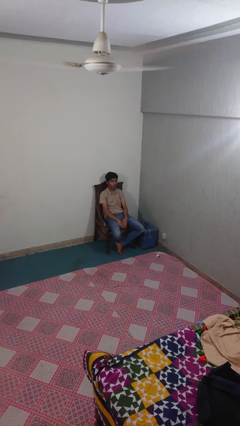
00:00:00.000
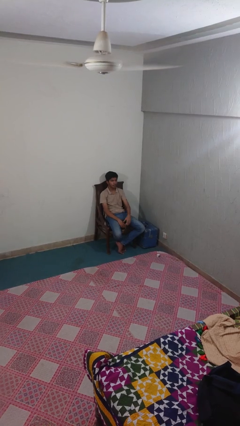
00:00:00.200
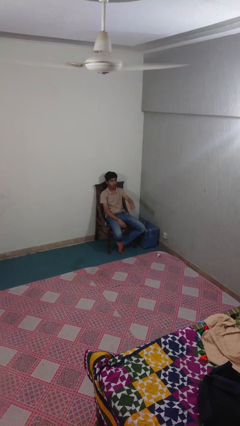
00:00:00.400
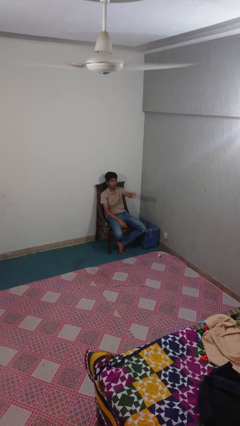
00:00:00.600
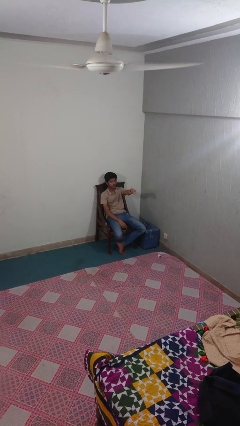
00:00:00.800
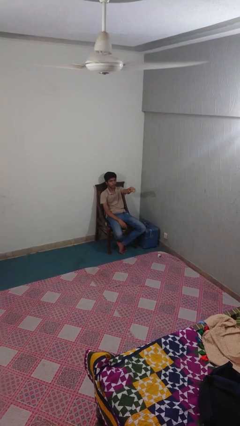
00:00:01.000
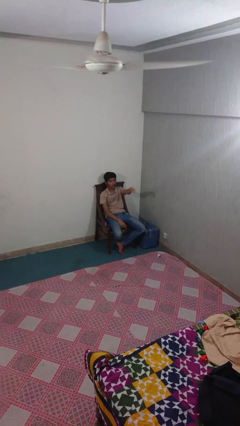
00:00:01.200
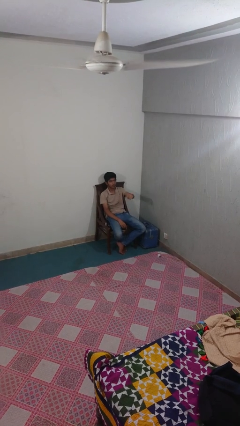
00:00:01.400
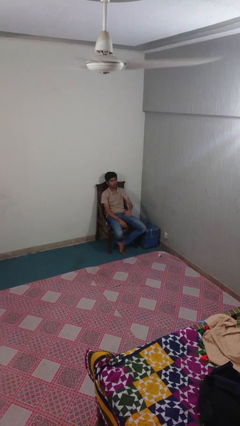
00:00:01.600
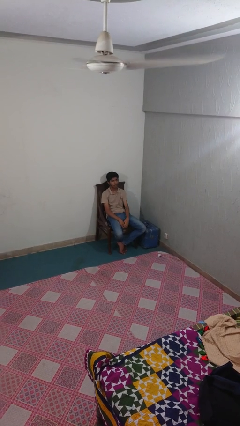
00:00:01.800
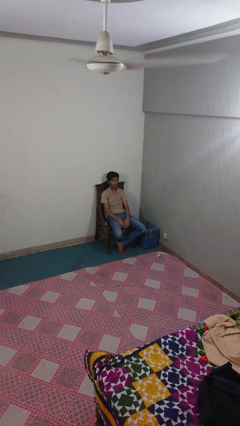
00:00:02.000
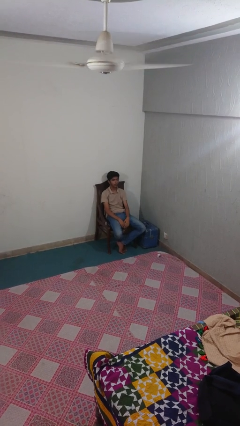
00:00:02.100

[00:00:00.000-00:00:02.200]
person points at person

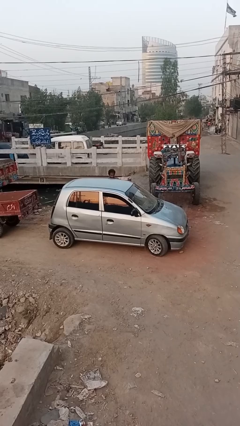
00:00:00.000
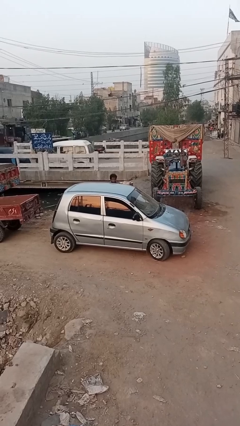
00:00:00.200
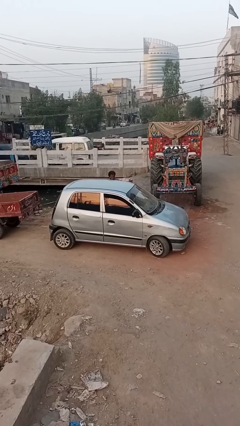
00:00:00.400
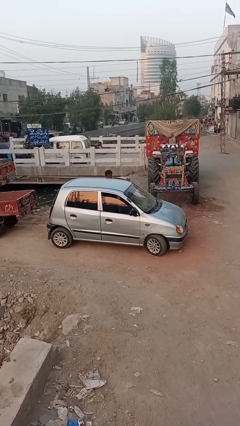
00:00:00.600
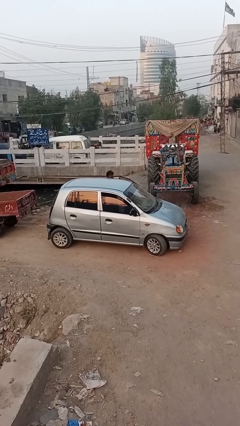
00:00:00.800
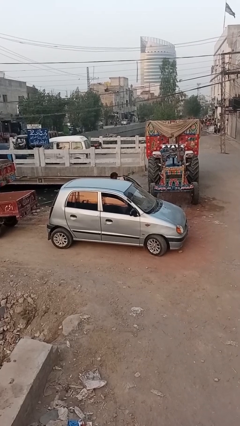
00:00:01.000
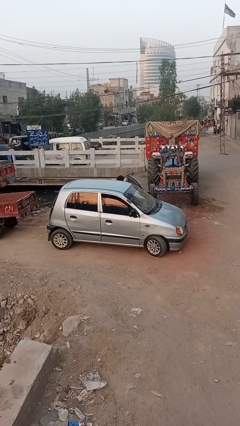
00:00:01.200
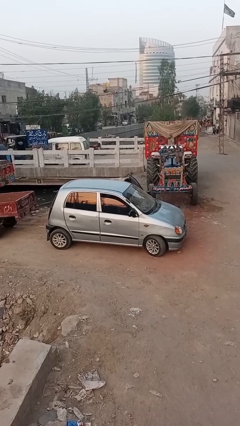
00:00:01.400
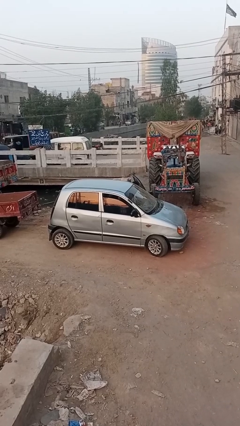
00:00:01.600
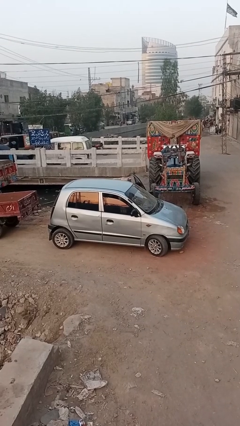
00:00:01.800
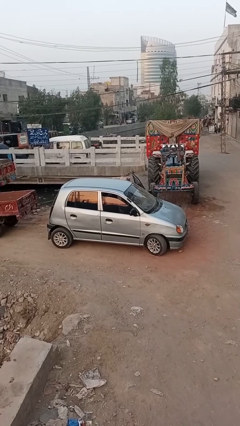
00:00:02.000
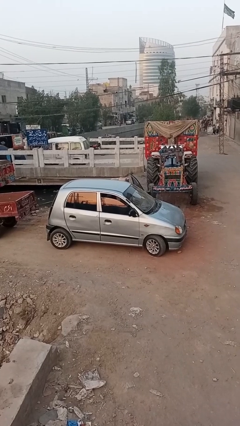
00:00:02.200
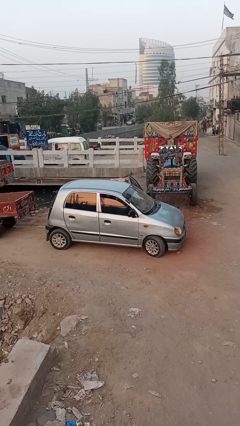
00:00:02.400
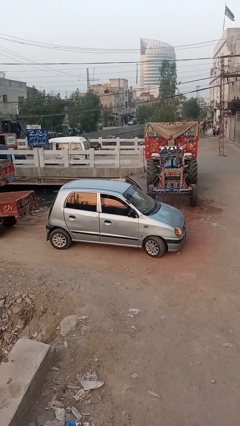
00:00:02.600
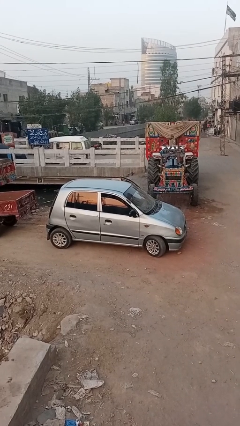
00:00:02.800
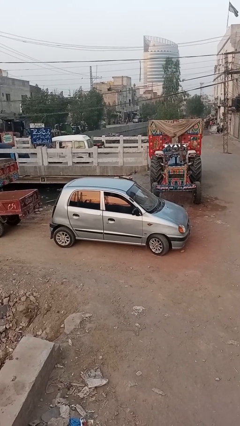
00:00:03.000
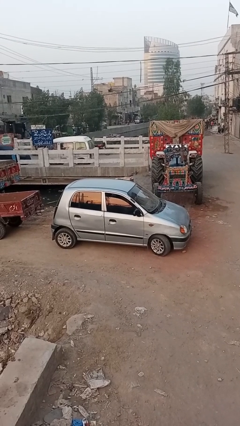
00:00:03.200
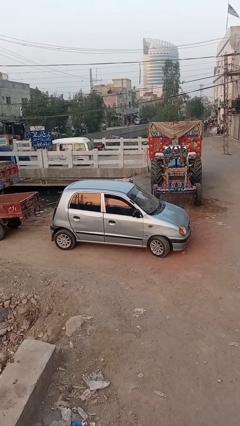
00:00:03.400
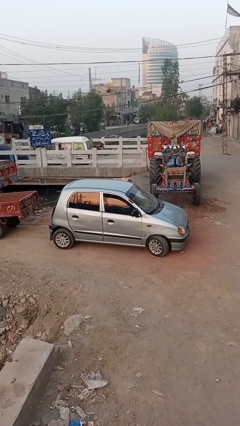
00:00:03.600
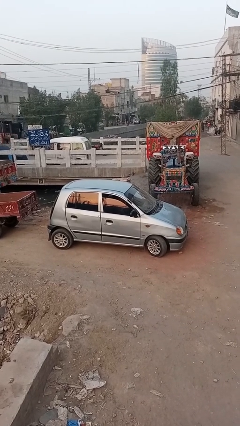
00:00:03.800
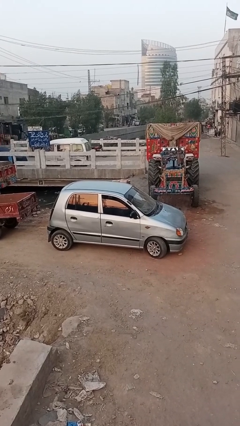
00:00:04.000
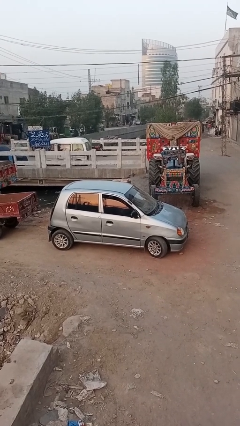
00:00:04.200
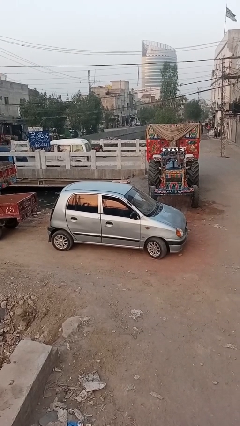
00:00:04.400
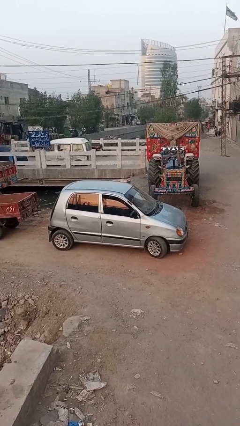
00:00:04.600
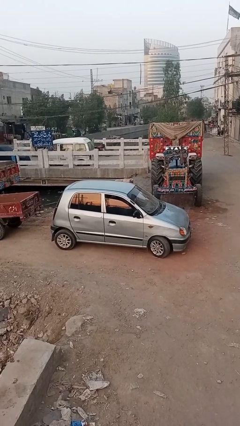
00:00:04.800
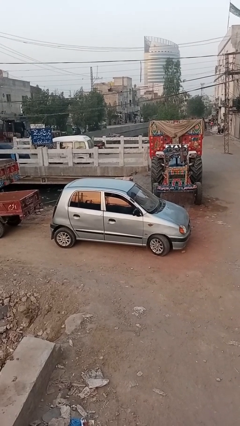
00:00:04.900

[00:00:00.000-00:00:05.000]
car picks up person

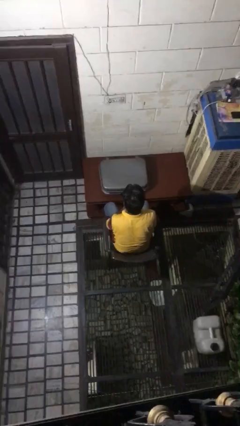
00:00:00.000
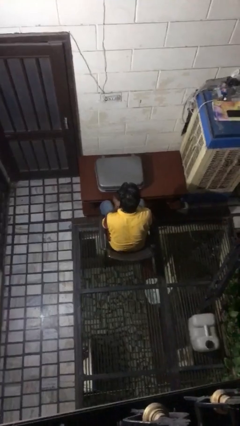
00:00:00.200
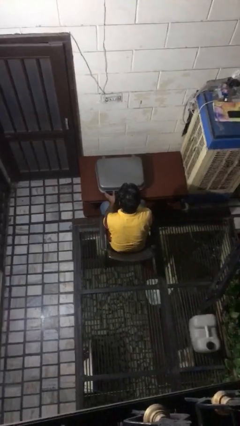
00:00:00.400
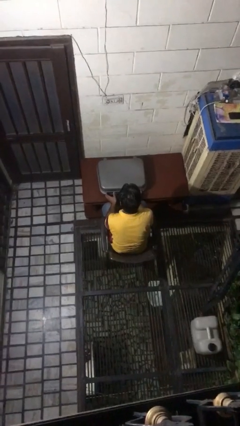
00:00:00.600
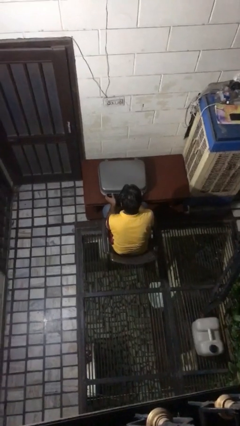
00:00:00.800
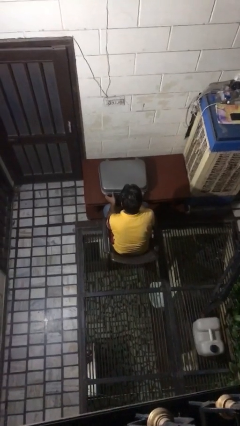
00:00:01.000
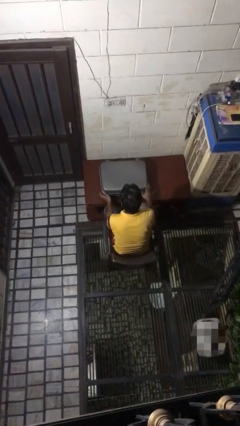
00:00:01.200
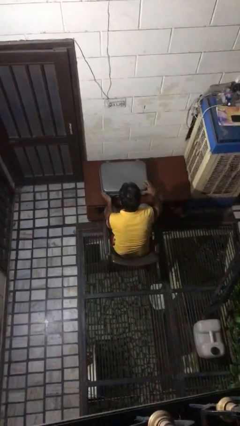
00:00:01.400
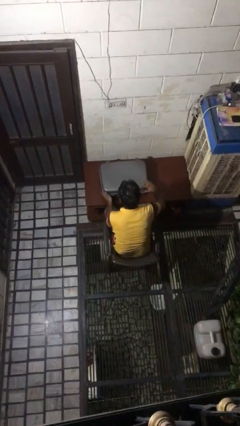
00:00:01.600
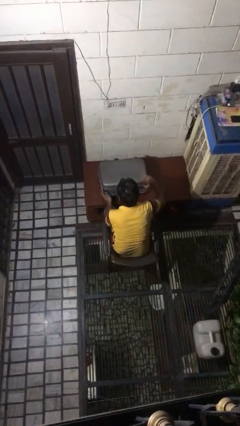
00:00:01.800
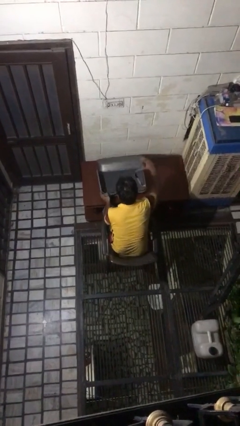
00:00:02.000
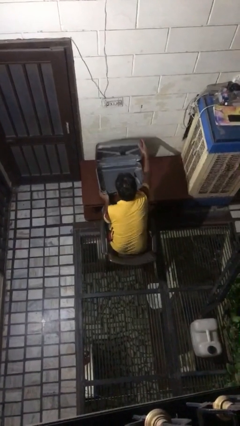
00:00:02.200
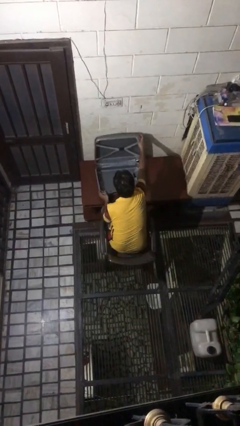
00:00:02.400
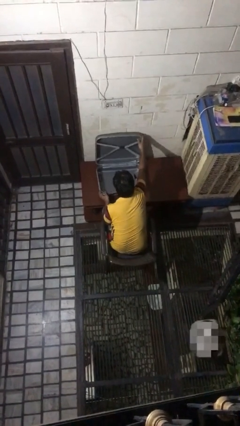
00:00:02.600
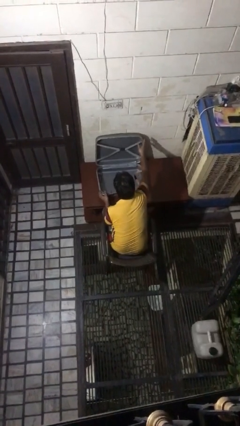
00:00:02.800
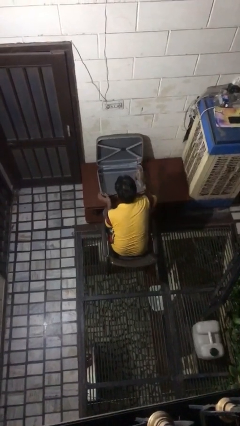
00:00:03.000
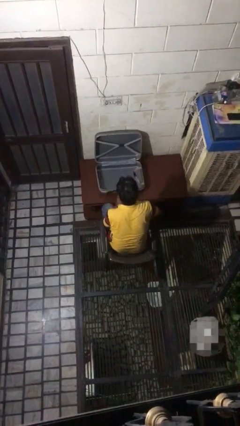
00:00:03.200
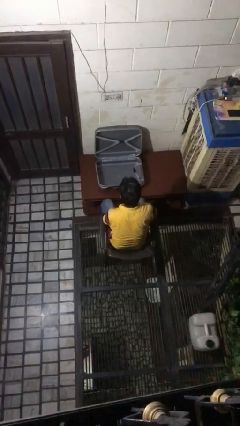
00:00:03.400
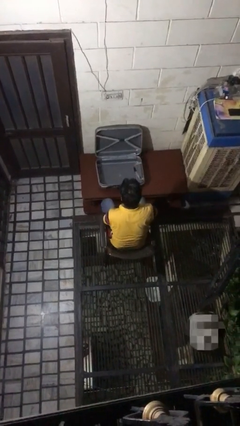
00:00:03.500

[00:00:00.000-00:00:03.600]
person opens suitcase

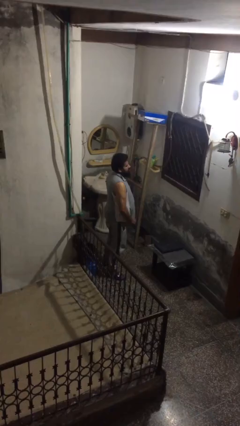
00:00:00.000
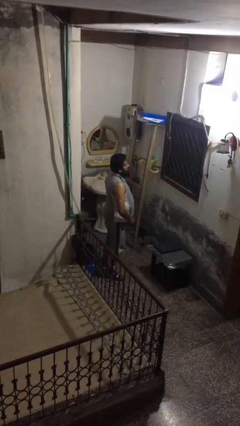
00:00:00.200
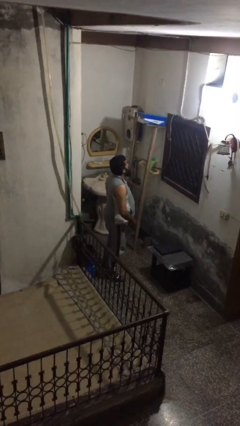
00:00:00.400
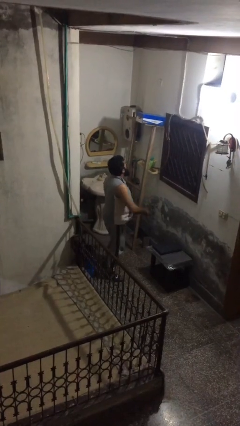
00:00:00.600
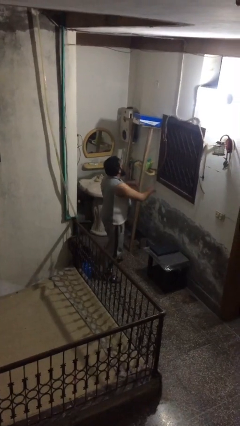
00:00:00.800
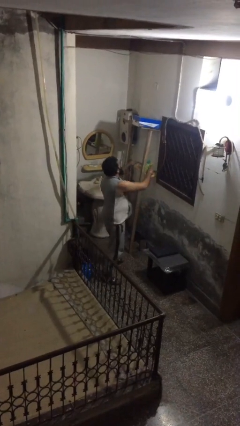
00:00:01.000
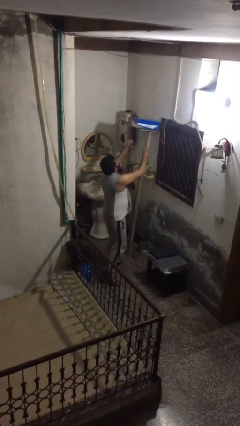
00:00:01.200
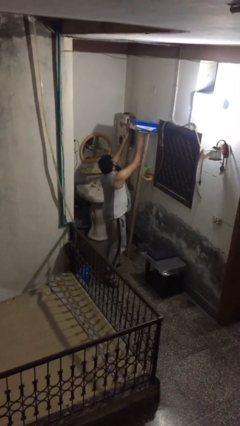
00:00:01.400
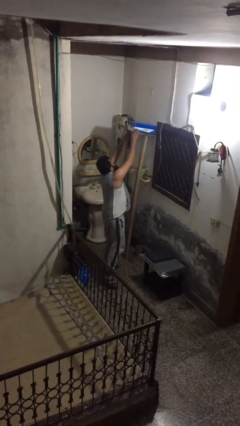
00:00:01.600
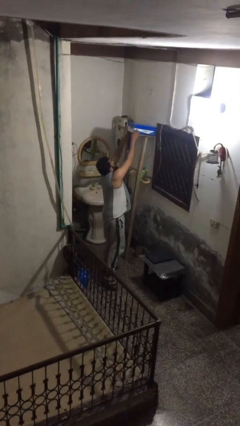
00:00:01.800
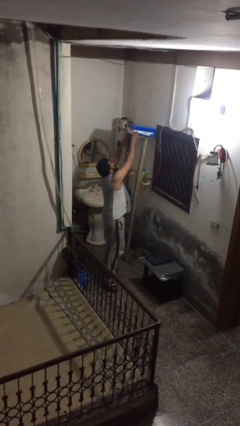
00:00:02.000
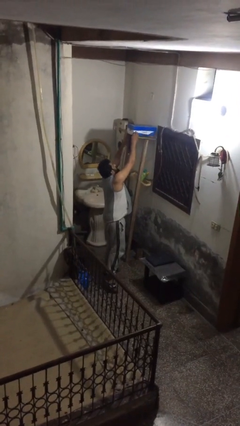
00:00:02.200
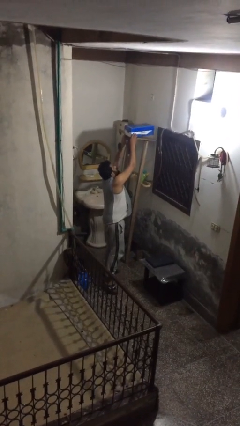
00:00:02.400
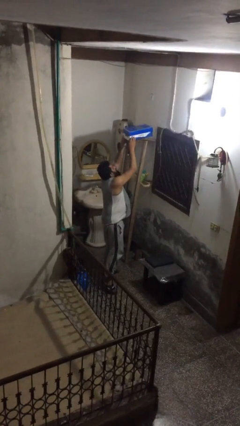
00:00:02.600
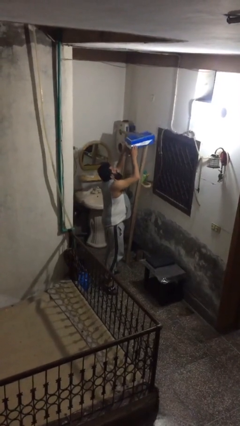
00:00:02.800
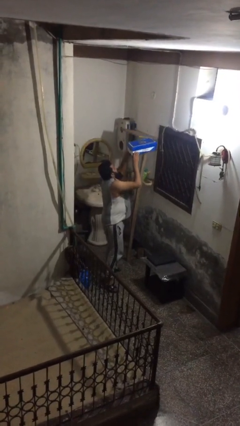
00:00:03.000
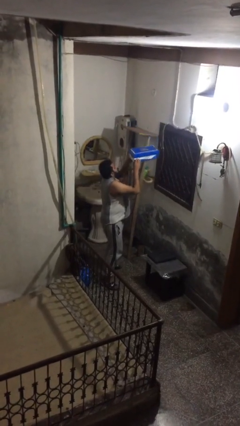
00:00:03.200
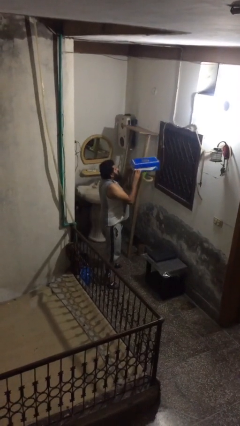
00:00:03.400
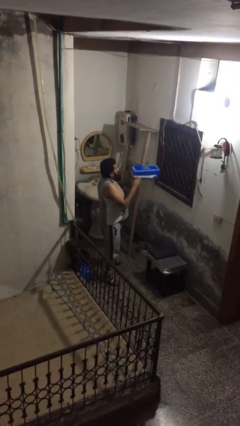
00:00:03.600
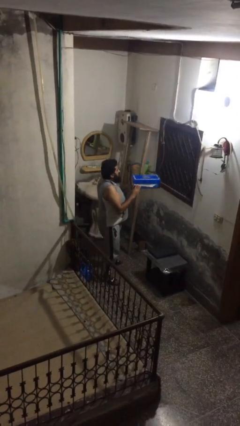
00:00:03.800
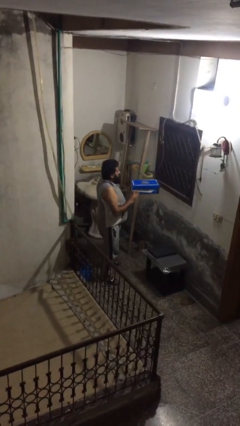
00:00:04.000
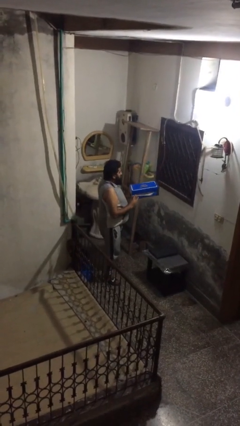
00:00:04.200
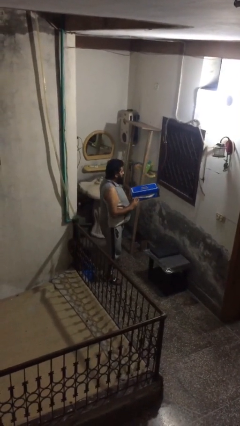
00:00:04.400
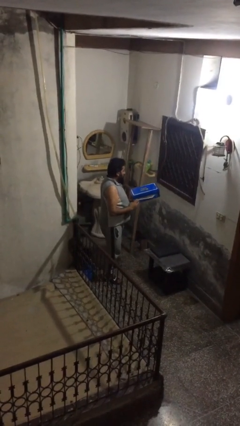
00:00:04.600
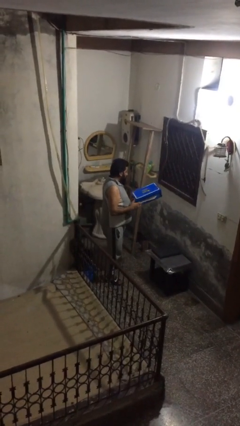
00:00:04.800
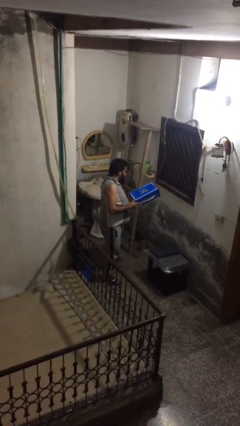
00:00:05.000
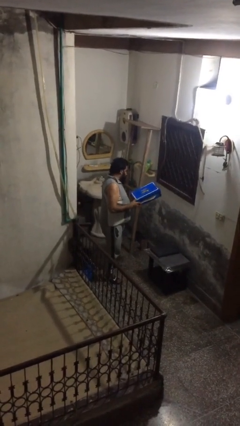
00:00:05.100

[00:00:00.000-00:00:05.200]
person picks up object from shelf

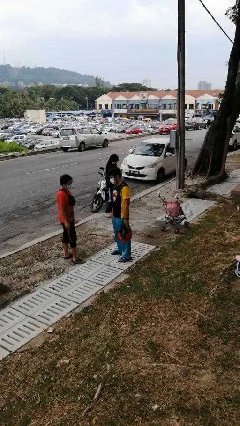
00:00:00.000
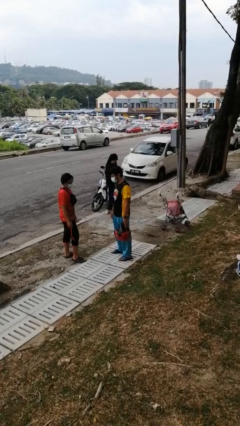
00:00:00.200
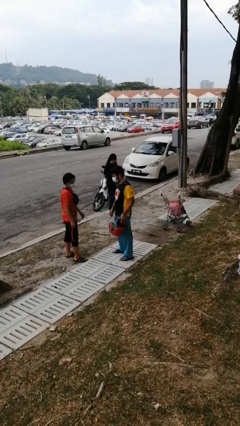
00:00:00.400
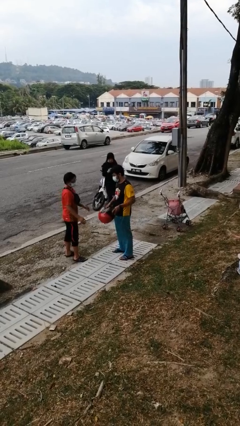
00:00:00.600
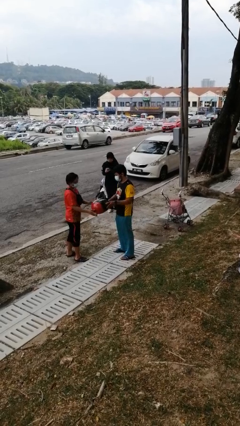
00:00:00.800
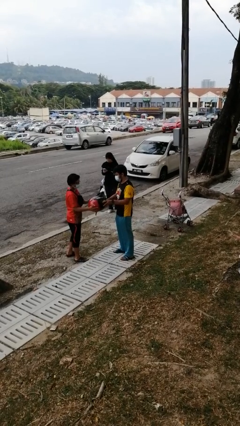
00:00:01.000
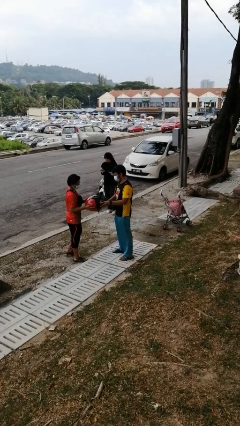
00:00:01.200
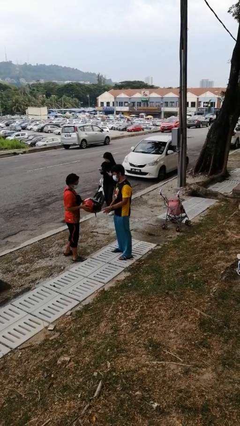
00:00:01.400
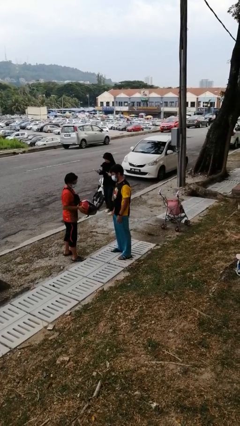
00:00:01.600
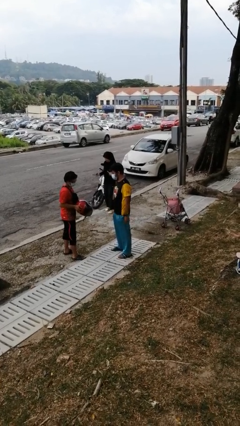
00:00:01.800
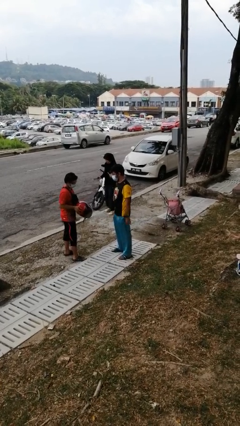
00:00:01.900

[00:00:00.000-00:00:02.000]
person transfers object to person
